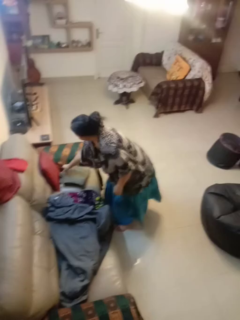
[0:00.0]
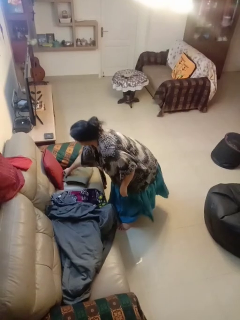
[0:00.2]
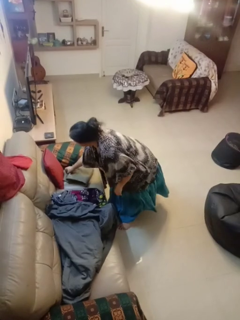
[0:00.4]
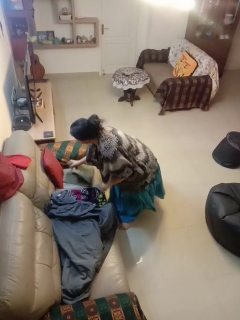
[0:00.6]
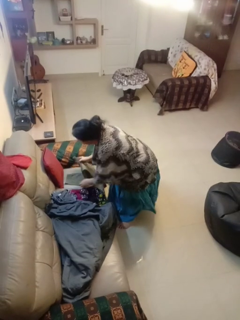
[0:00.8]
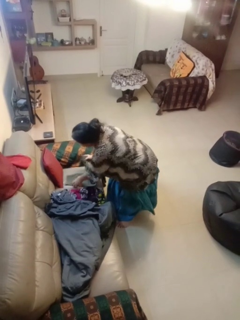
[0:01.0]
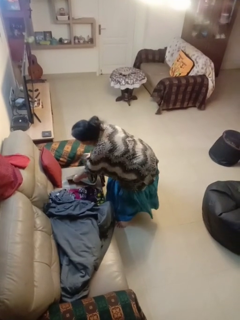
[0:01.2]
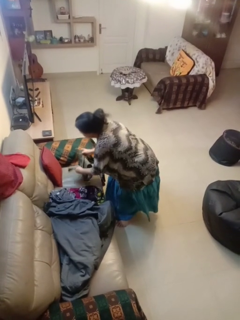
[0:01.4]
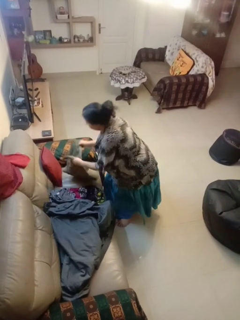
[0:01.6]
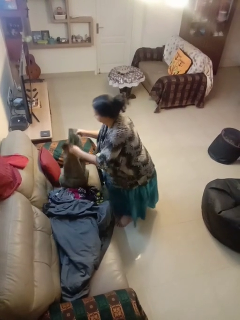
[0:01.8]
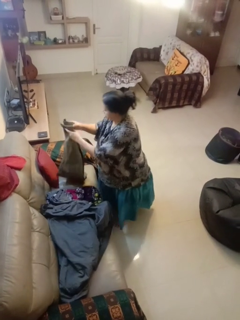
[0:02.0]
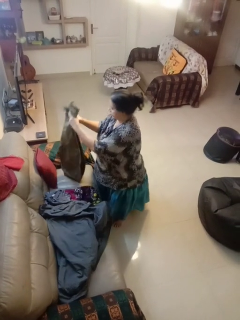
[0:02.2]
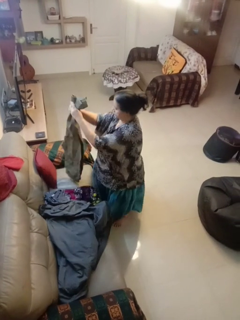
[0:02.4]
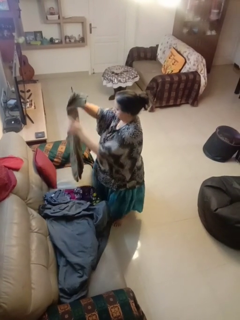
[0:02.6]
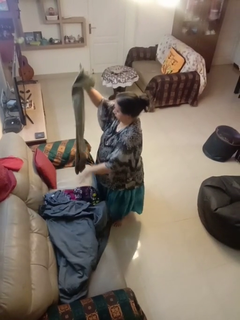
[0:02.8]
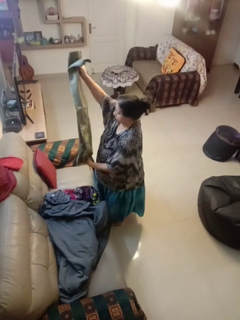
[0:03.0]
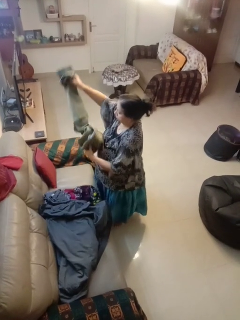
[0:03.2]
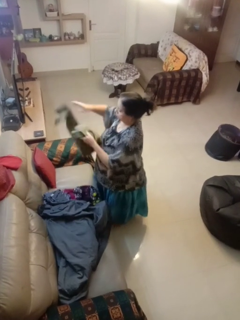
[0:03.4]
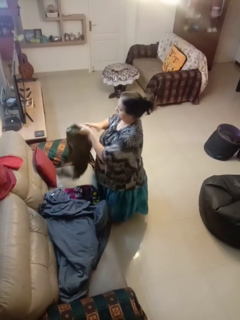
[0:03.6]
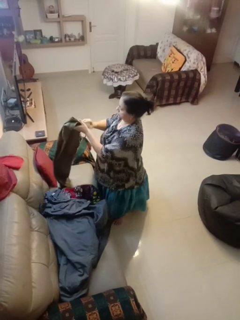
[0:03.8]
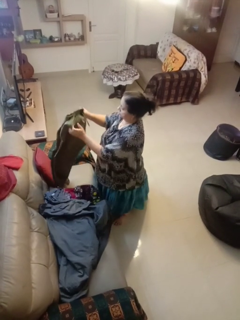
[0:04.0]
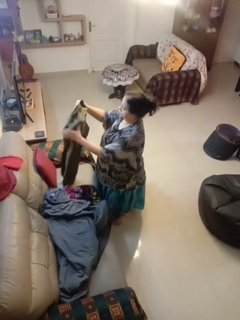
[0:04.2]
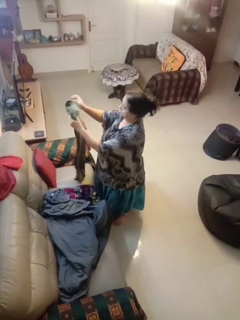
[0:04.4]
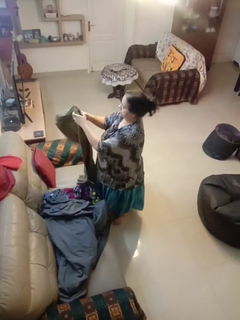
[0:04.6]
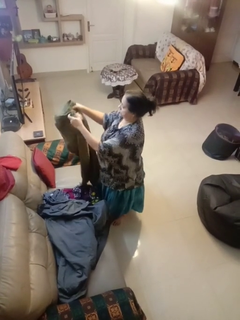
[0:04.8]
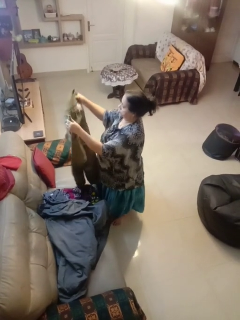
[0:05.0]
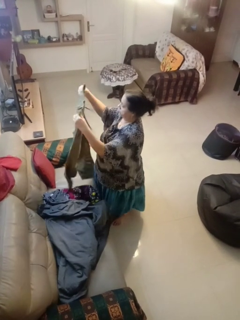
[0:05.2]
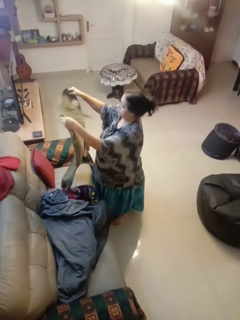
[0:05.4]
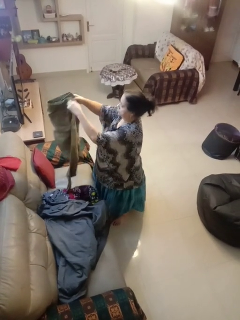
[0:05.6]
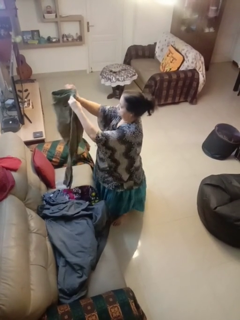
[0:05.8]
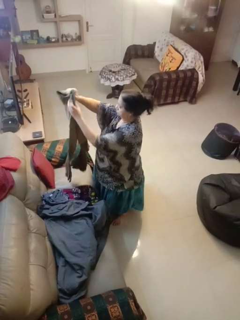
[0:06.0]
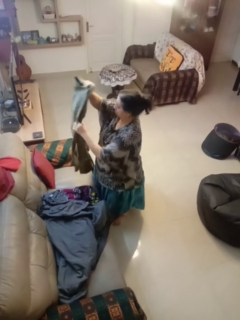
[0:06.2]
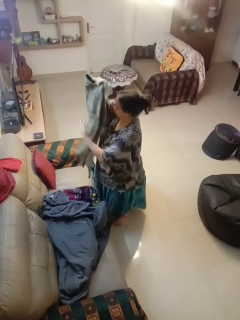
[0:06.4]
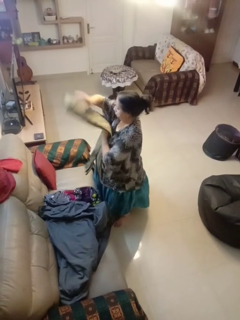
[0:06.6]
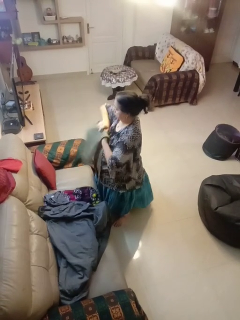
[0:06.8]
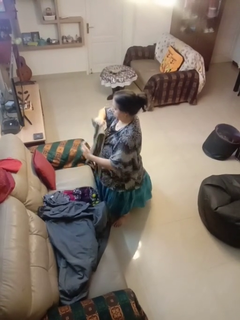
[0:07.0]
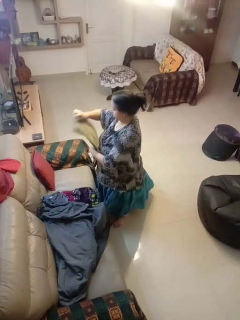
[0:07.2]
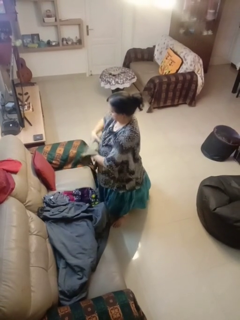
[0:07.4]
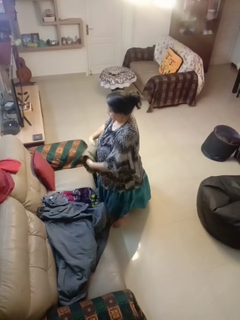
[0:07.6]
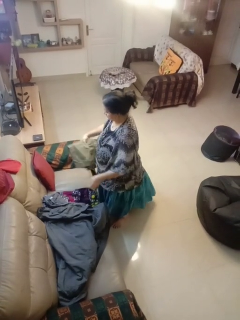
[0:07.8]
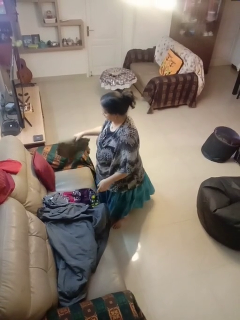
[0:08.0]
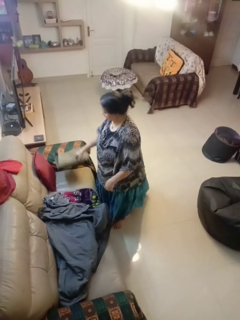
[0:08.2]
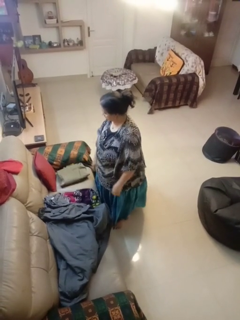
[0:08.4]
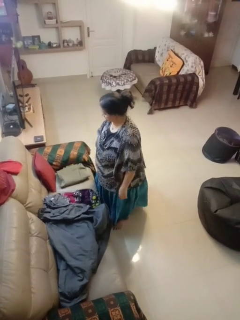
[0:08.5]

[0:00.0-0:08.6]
person folds pants

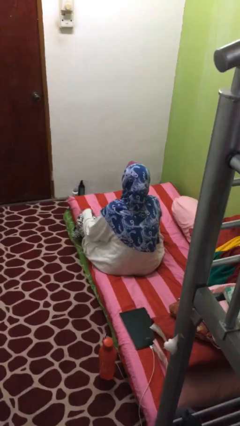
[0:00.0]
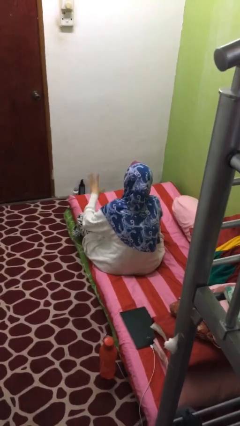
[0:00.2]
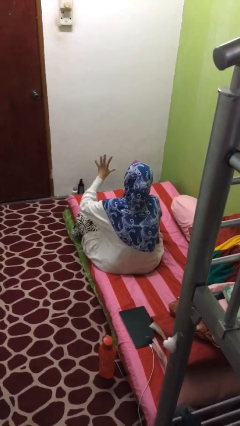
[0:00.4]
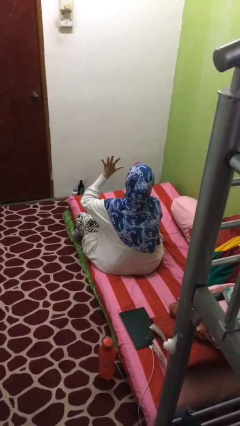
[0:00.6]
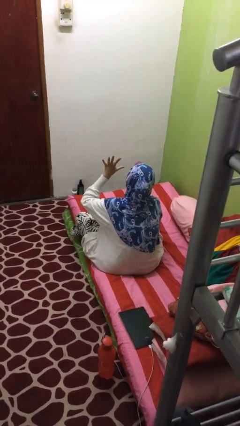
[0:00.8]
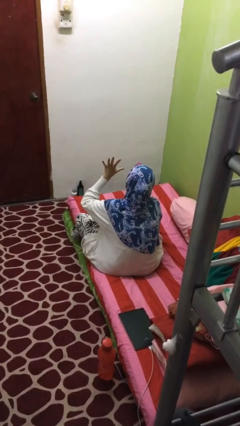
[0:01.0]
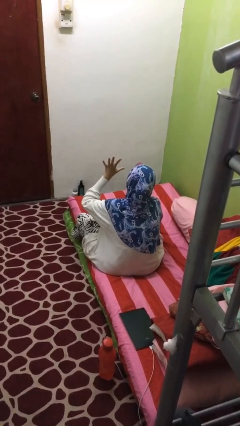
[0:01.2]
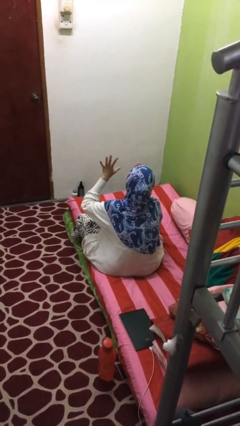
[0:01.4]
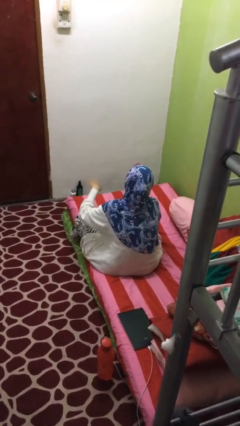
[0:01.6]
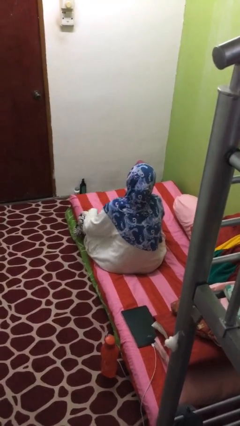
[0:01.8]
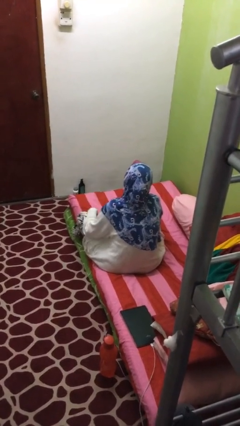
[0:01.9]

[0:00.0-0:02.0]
person gestures number five

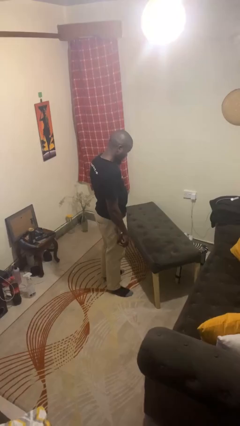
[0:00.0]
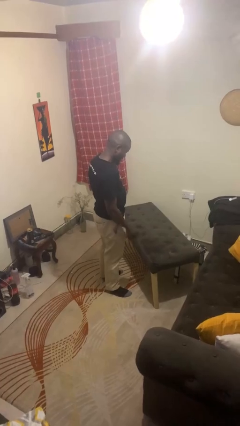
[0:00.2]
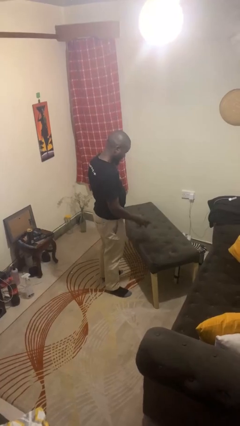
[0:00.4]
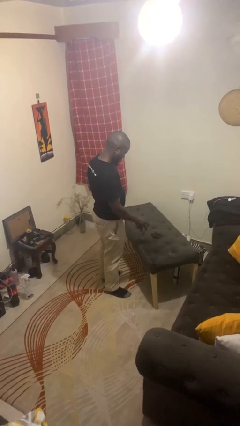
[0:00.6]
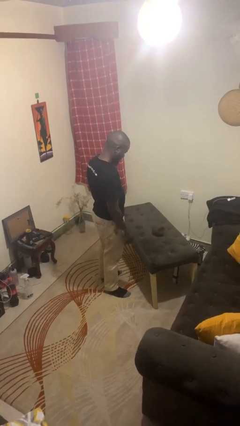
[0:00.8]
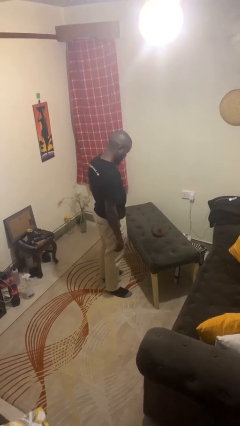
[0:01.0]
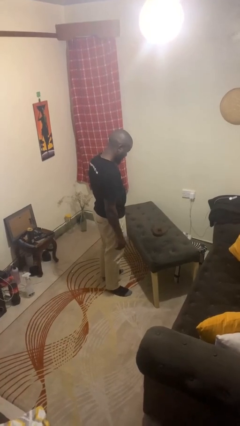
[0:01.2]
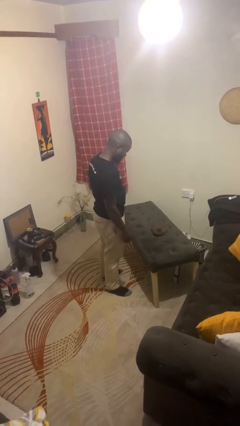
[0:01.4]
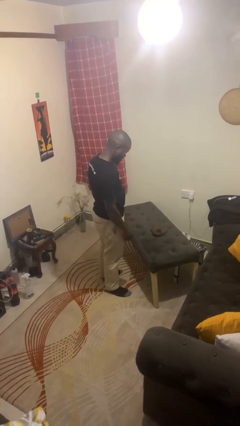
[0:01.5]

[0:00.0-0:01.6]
person throws object on table

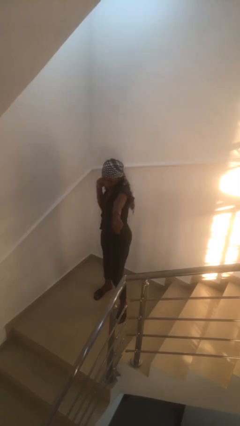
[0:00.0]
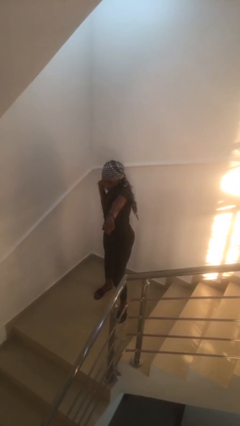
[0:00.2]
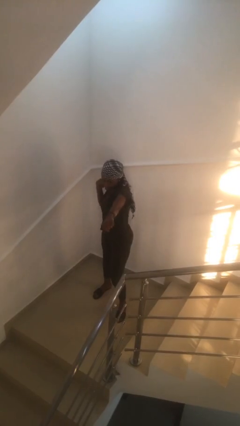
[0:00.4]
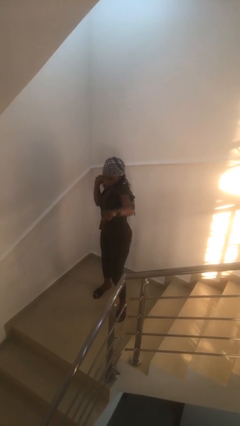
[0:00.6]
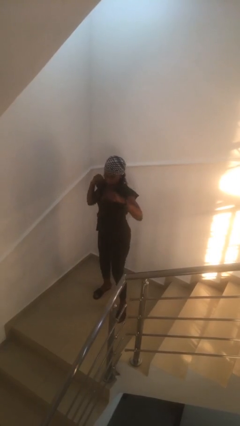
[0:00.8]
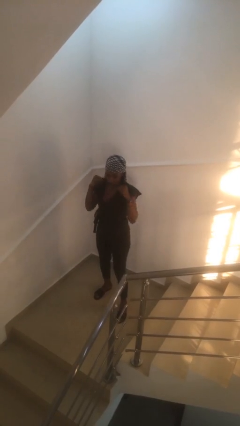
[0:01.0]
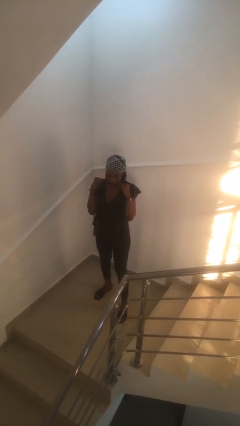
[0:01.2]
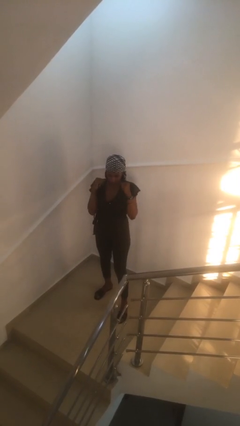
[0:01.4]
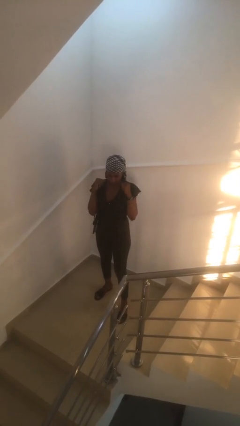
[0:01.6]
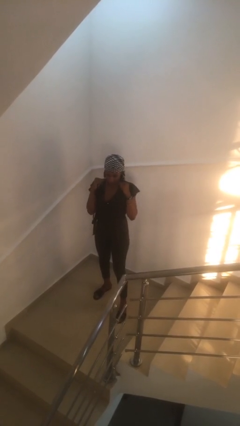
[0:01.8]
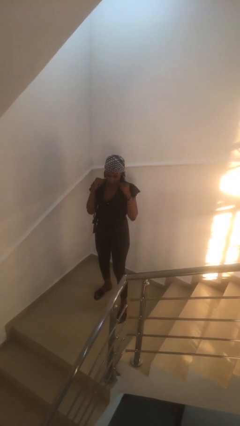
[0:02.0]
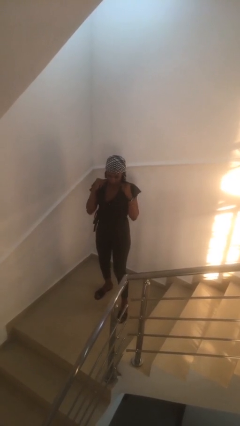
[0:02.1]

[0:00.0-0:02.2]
person punches

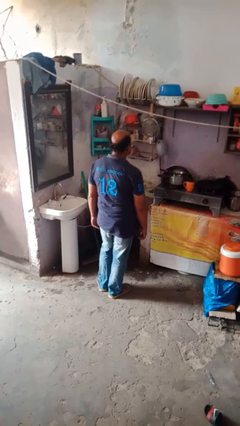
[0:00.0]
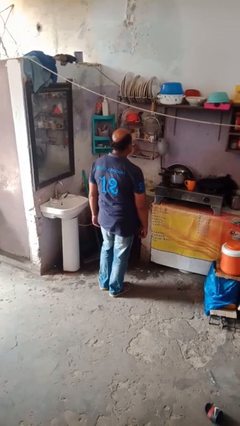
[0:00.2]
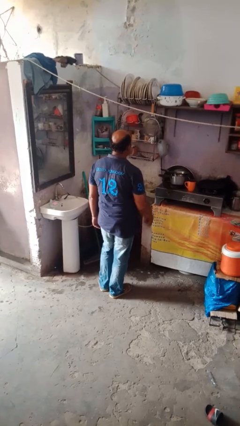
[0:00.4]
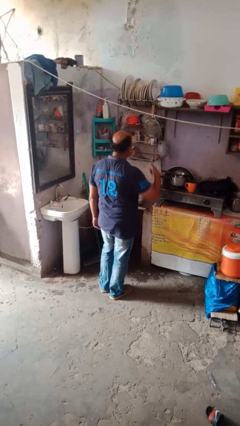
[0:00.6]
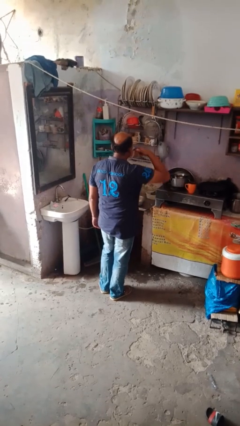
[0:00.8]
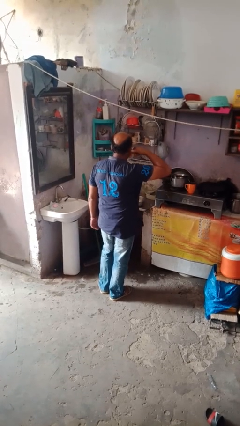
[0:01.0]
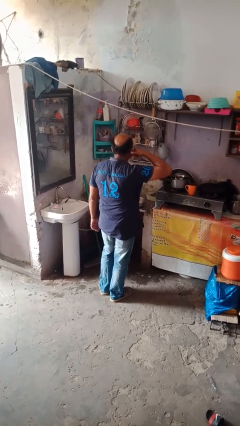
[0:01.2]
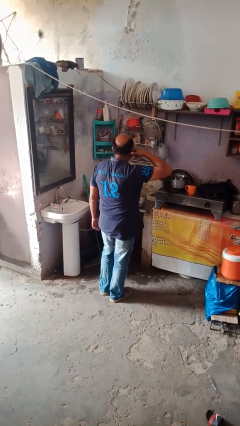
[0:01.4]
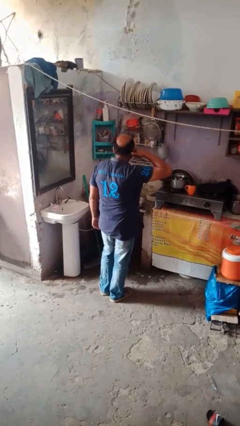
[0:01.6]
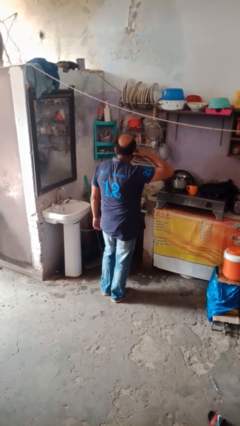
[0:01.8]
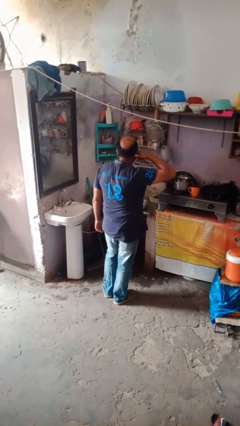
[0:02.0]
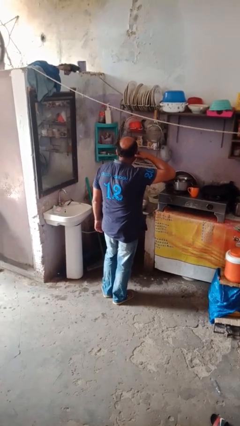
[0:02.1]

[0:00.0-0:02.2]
person gestures call me

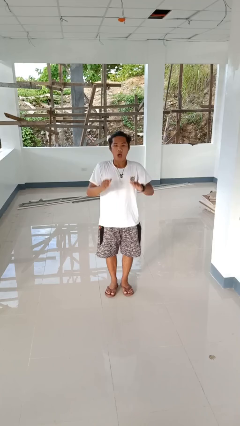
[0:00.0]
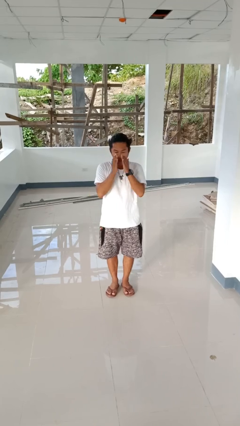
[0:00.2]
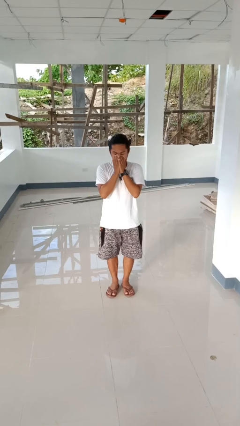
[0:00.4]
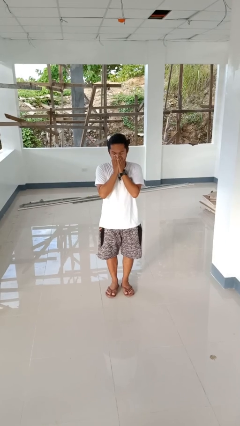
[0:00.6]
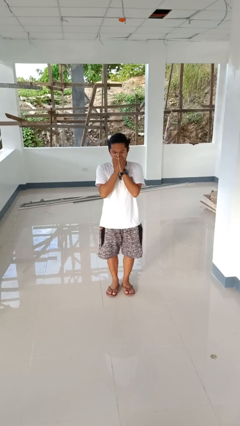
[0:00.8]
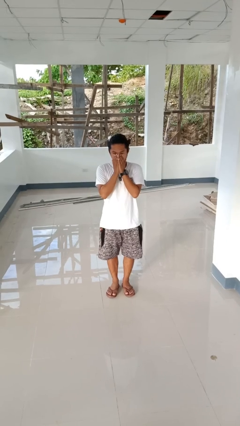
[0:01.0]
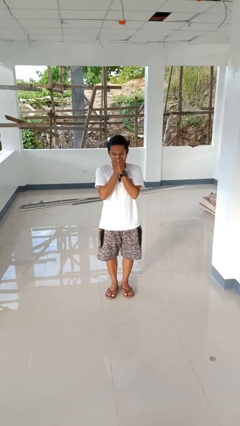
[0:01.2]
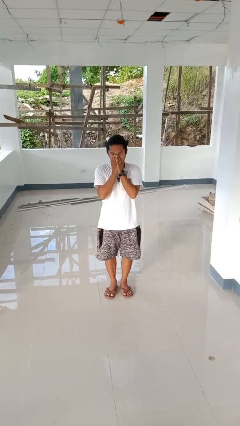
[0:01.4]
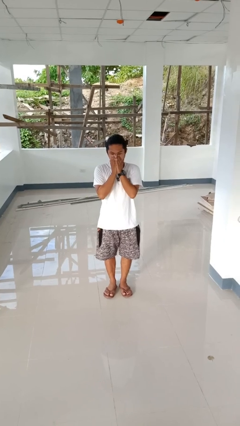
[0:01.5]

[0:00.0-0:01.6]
person sneezes into hand

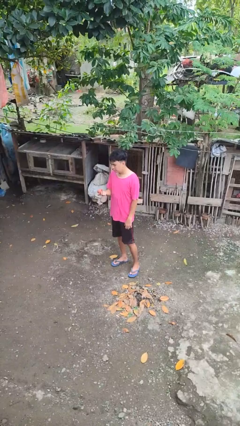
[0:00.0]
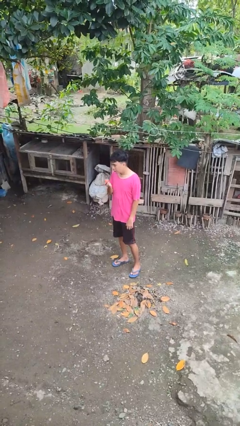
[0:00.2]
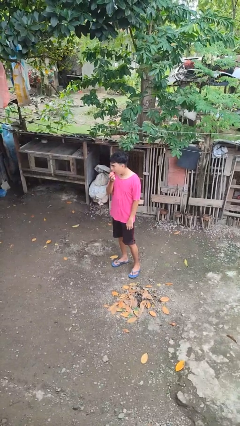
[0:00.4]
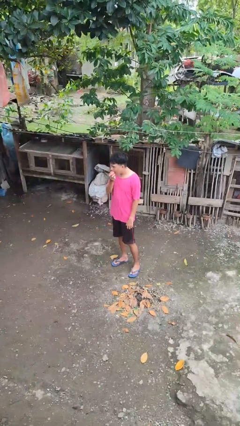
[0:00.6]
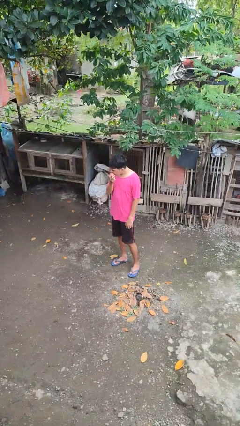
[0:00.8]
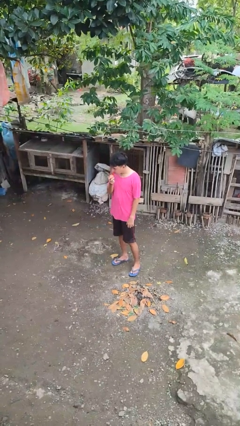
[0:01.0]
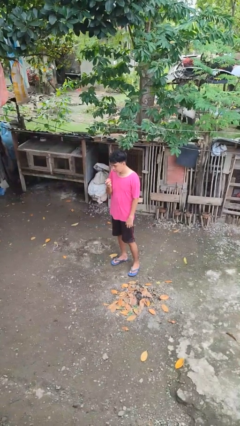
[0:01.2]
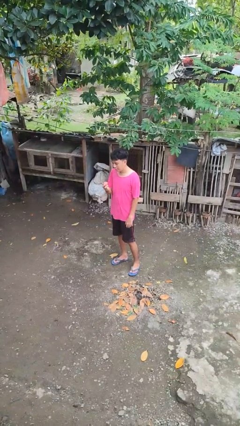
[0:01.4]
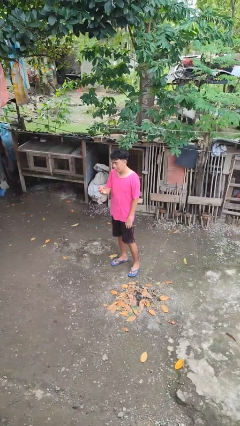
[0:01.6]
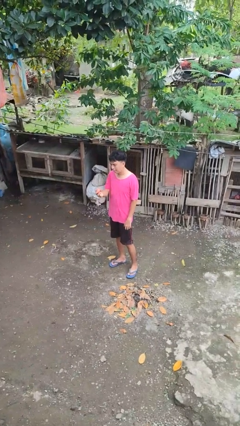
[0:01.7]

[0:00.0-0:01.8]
person eats apple
